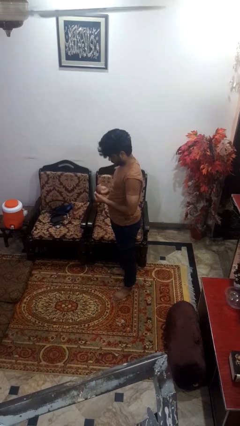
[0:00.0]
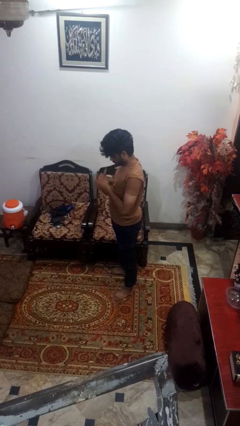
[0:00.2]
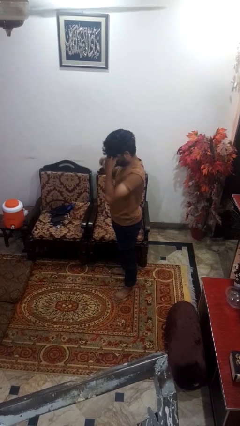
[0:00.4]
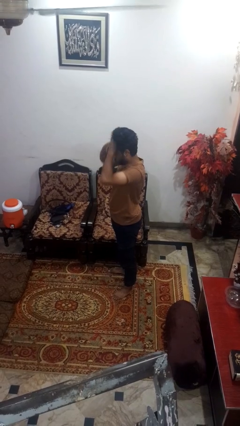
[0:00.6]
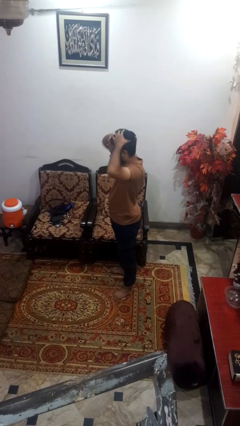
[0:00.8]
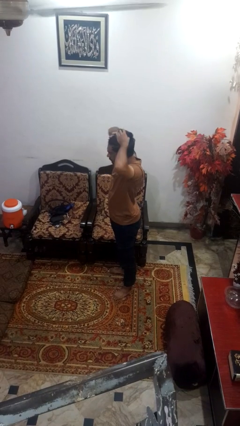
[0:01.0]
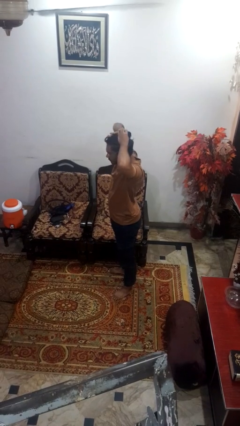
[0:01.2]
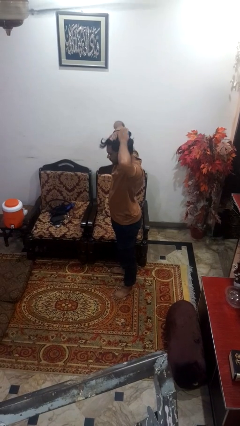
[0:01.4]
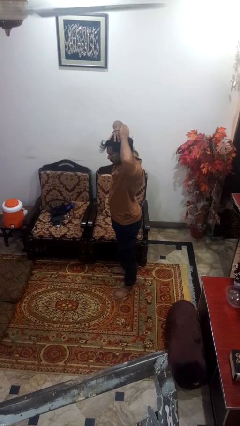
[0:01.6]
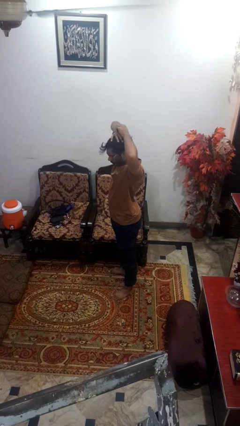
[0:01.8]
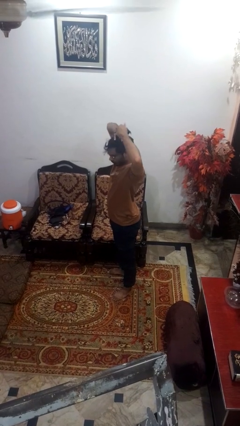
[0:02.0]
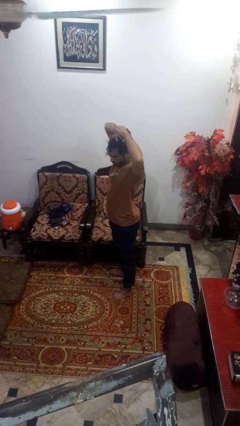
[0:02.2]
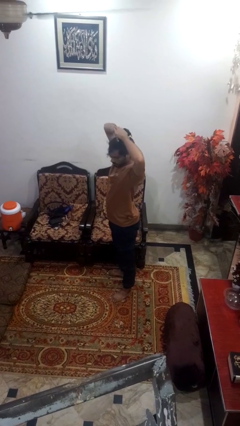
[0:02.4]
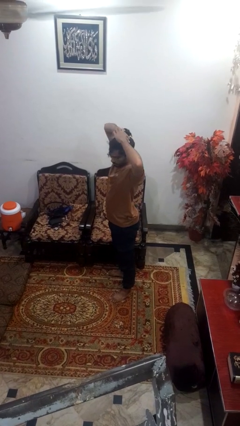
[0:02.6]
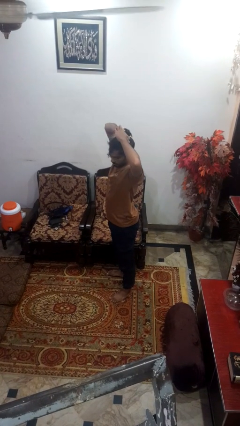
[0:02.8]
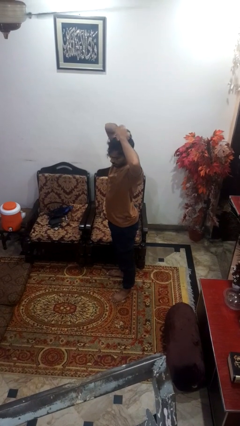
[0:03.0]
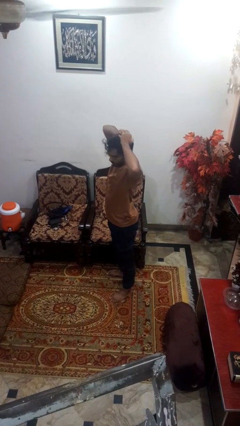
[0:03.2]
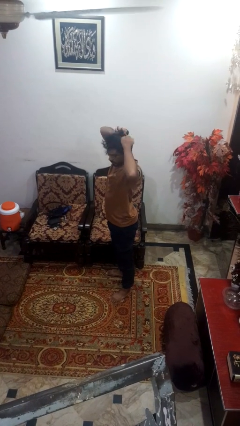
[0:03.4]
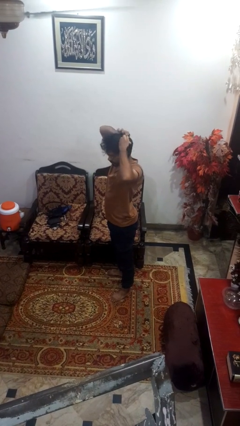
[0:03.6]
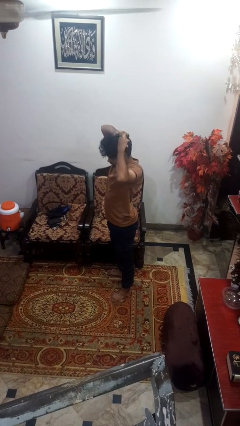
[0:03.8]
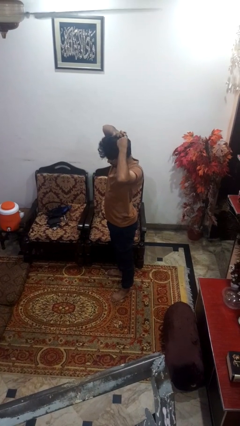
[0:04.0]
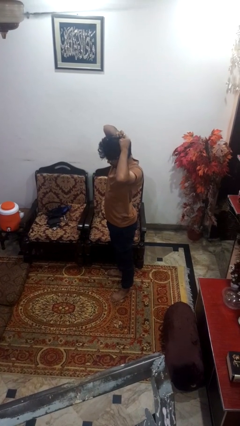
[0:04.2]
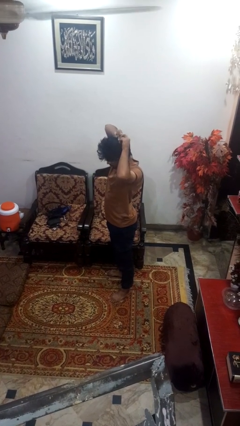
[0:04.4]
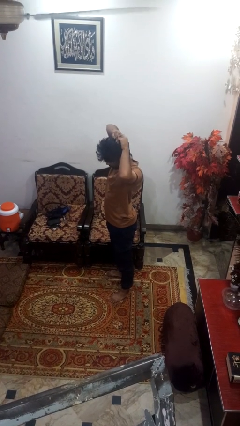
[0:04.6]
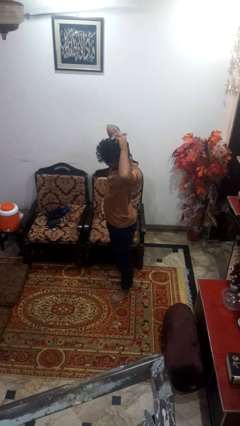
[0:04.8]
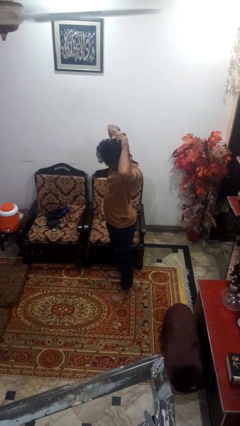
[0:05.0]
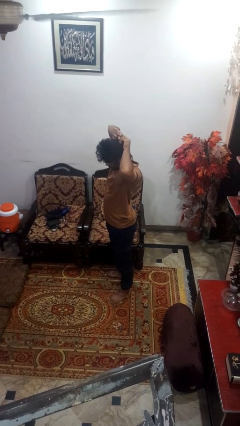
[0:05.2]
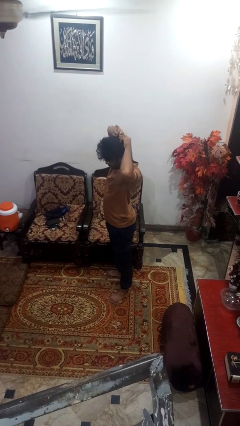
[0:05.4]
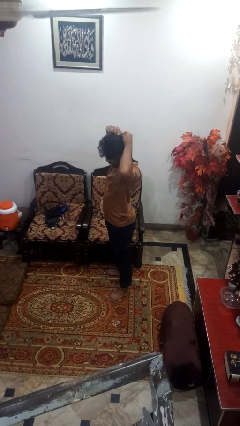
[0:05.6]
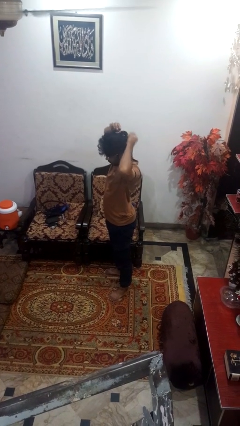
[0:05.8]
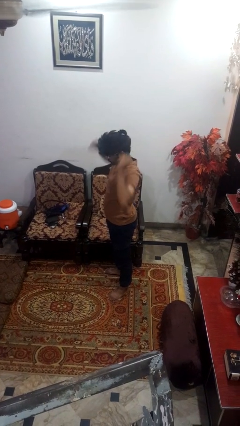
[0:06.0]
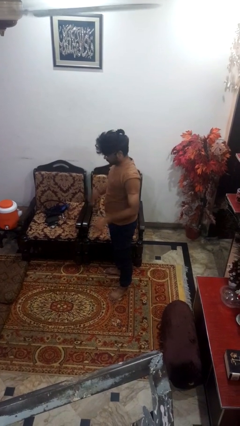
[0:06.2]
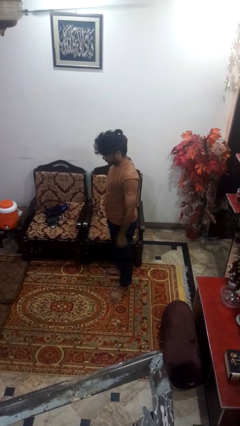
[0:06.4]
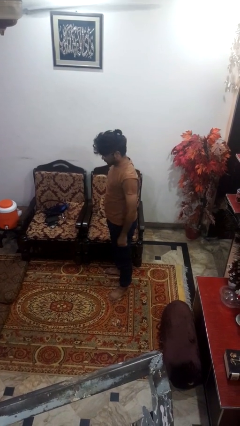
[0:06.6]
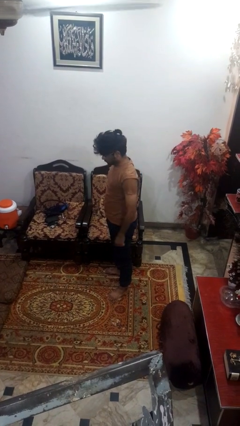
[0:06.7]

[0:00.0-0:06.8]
person puts hair in ponytail

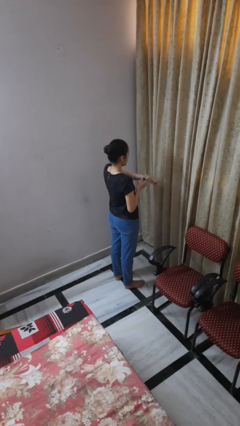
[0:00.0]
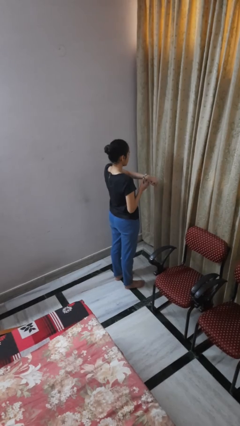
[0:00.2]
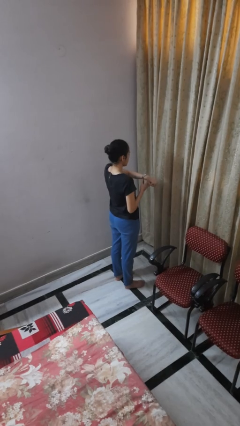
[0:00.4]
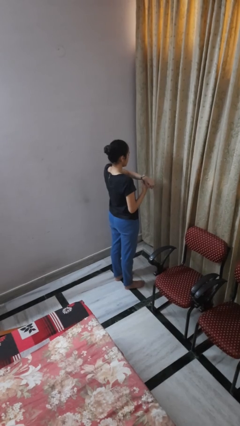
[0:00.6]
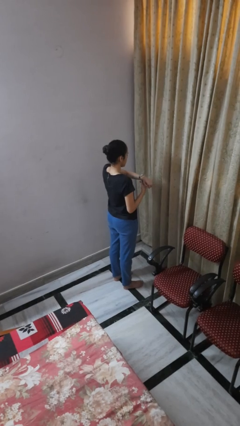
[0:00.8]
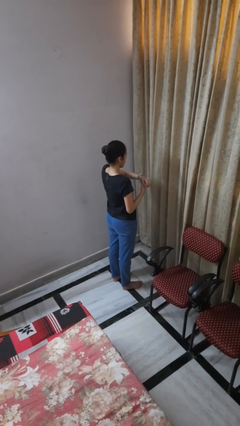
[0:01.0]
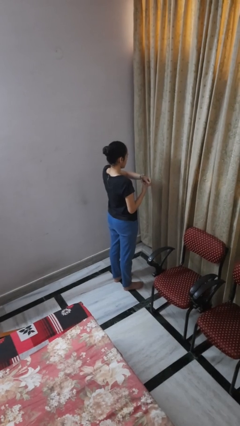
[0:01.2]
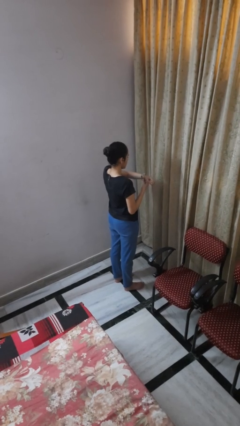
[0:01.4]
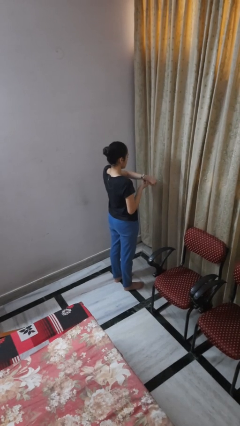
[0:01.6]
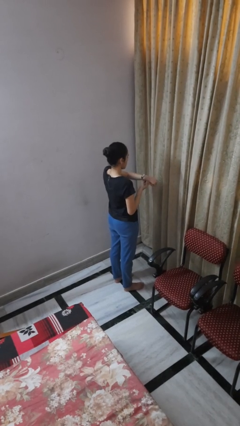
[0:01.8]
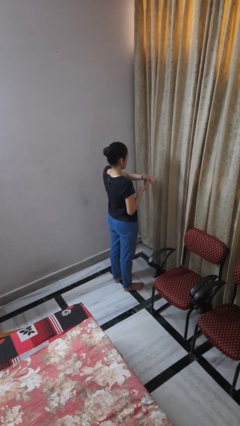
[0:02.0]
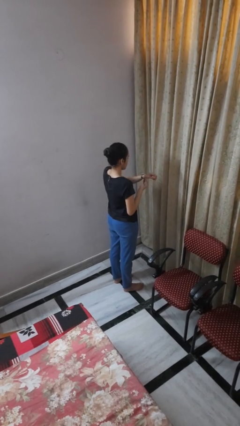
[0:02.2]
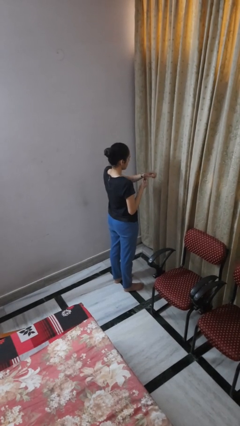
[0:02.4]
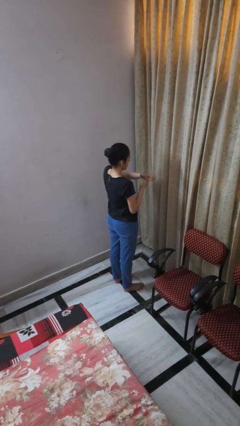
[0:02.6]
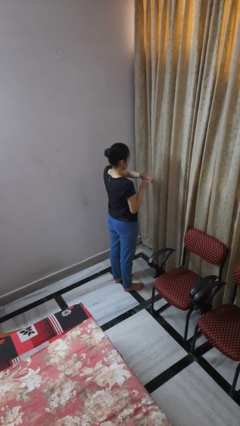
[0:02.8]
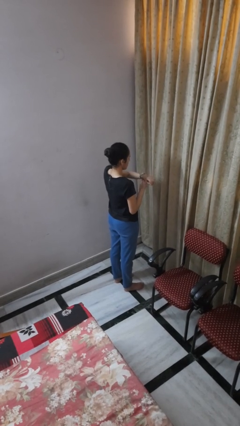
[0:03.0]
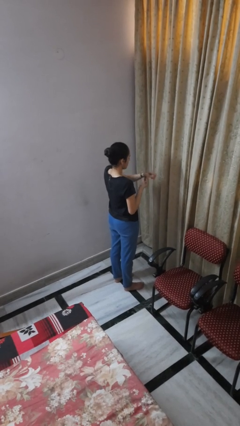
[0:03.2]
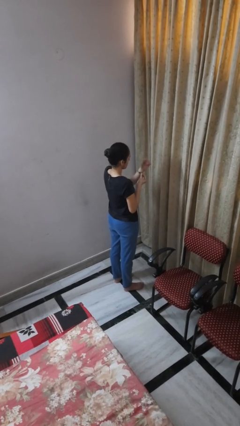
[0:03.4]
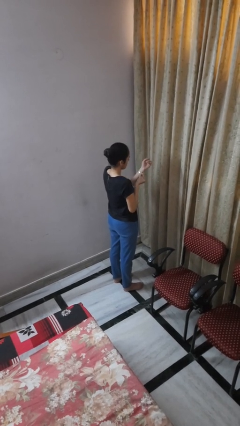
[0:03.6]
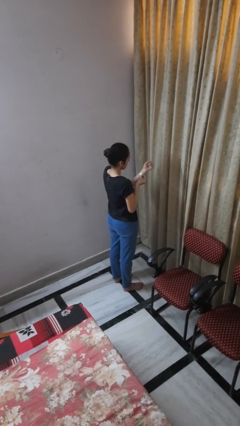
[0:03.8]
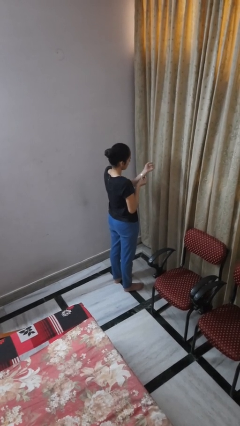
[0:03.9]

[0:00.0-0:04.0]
person puts on wristwatch

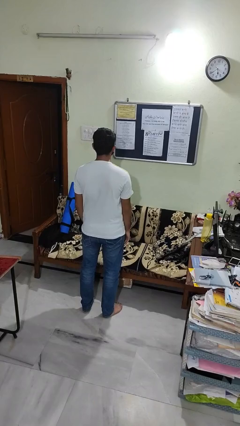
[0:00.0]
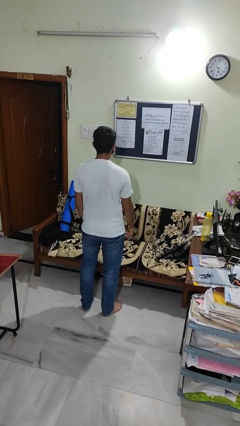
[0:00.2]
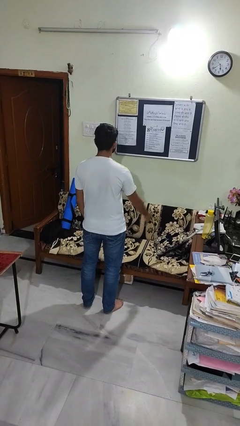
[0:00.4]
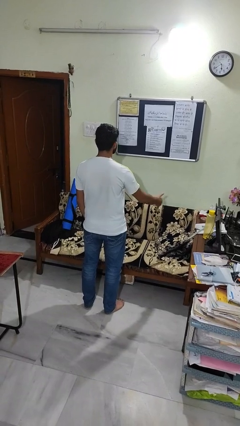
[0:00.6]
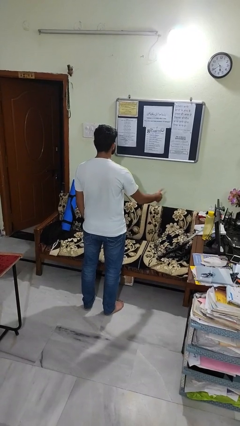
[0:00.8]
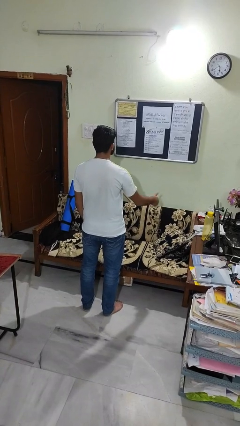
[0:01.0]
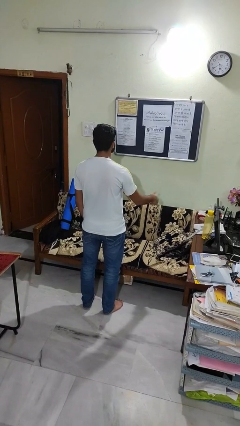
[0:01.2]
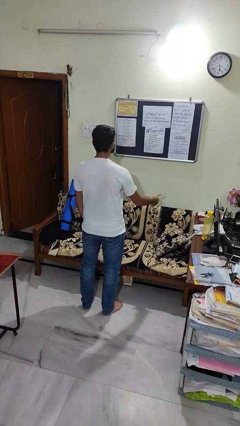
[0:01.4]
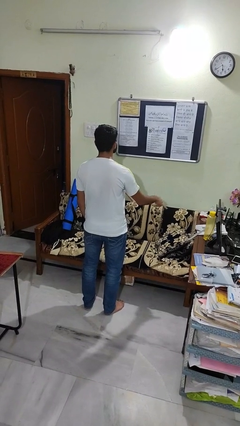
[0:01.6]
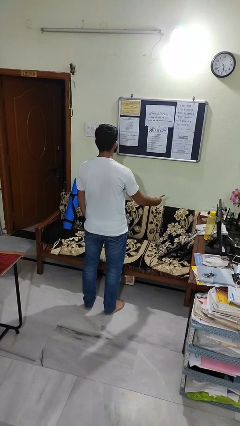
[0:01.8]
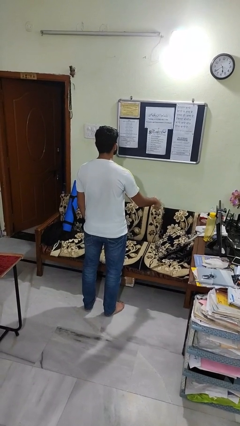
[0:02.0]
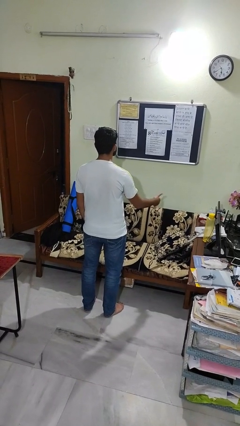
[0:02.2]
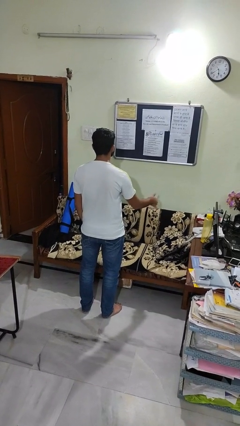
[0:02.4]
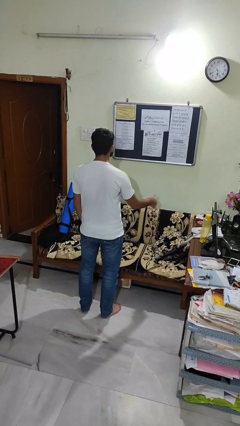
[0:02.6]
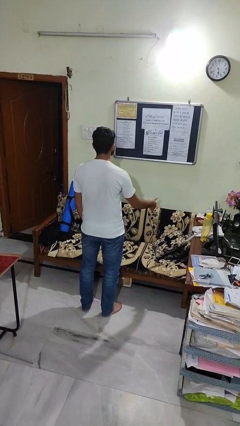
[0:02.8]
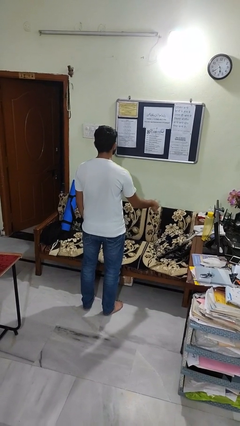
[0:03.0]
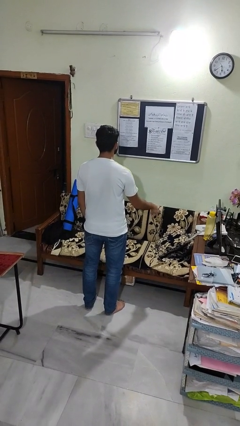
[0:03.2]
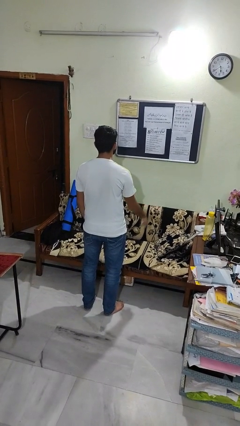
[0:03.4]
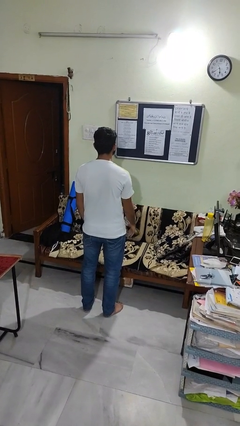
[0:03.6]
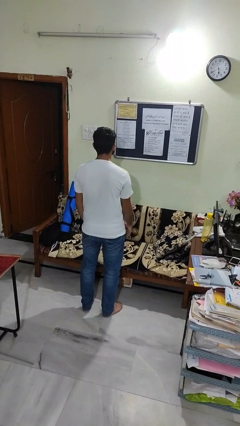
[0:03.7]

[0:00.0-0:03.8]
person gestures hang loose

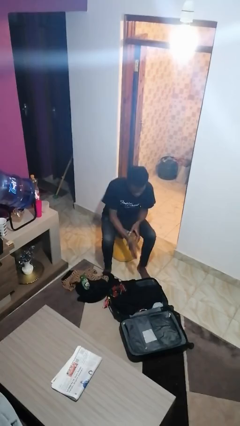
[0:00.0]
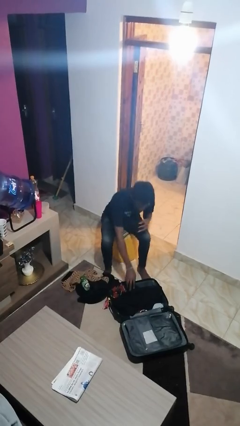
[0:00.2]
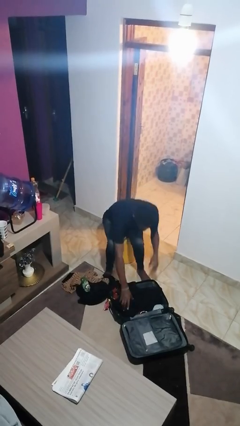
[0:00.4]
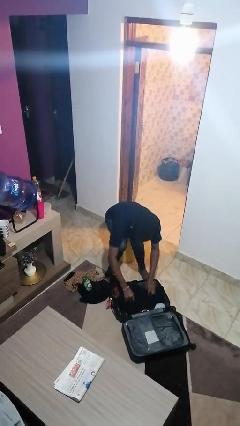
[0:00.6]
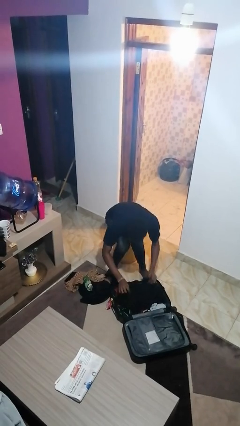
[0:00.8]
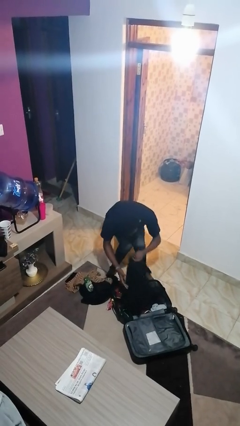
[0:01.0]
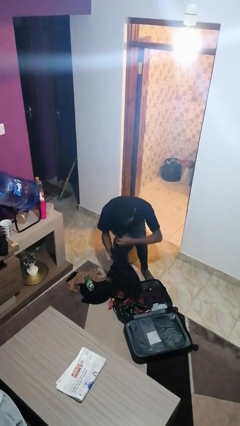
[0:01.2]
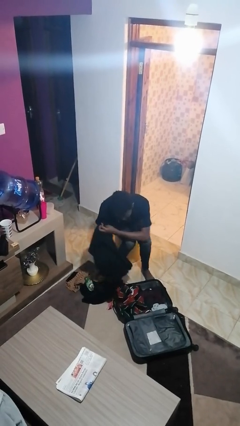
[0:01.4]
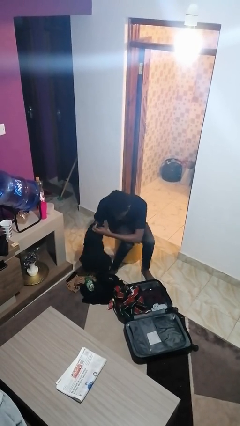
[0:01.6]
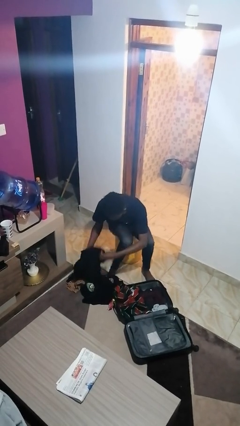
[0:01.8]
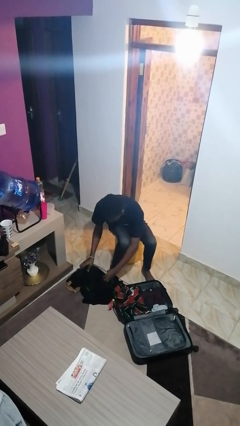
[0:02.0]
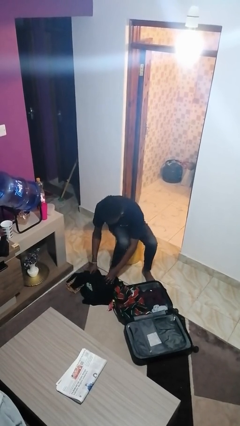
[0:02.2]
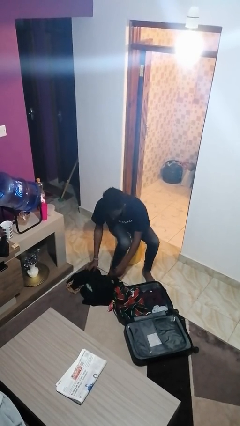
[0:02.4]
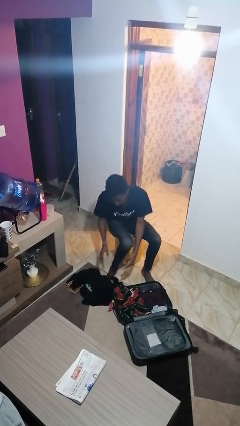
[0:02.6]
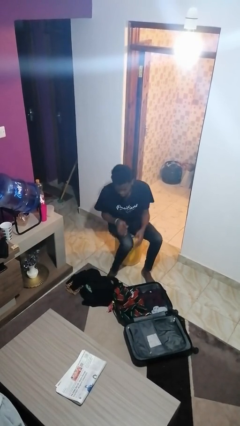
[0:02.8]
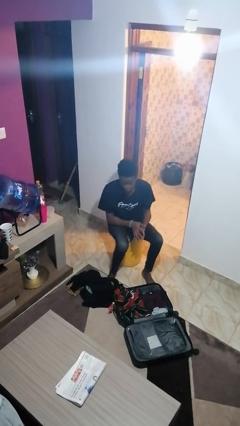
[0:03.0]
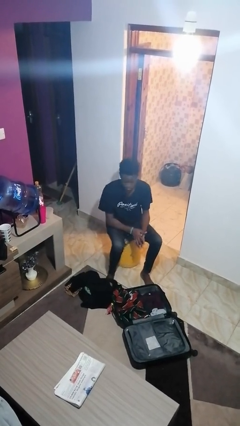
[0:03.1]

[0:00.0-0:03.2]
person unloads clothes from suitcase

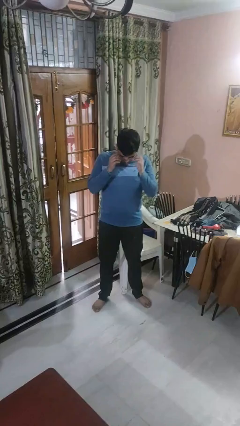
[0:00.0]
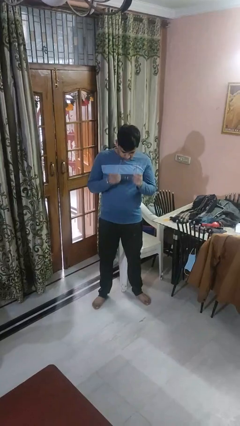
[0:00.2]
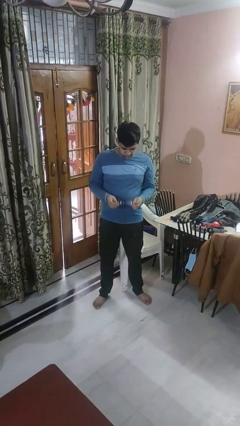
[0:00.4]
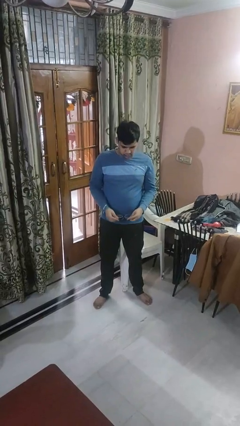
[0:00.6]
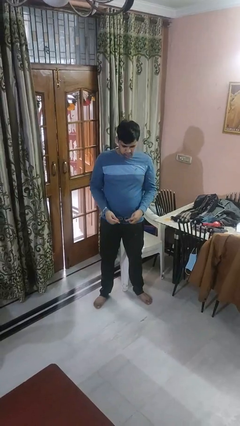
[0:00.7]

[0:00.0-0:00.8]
person takes off glasses
